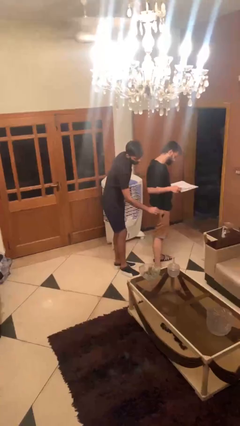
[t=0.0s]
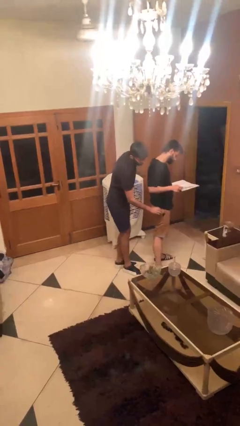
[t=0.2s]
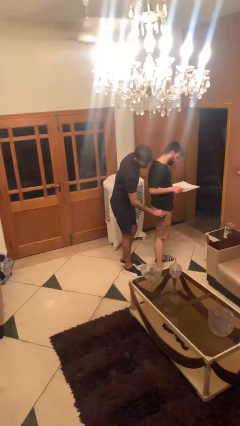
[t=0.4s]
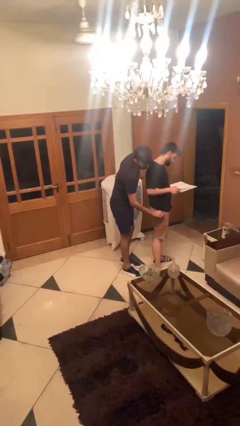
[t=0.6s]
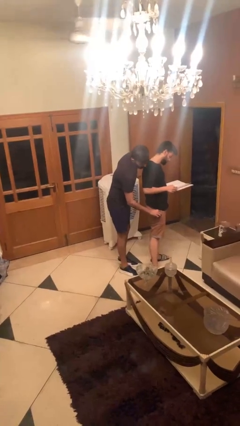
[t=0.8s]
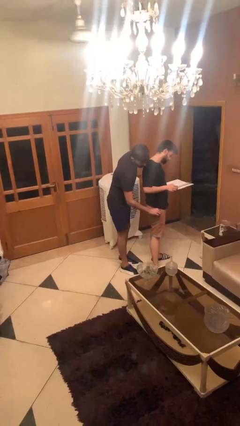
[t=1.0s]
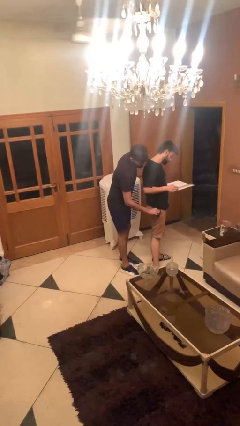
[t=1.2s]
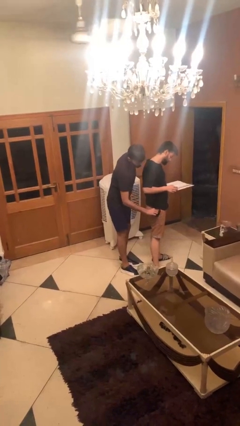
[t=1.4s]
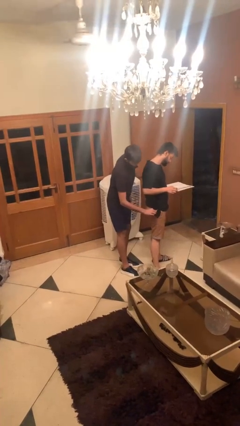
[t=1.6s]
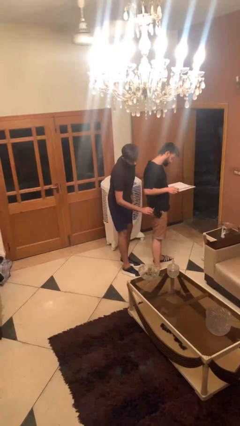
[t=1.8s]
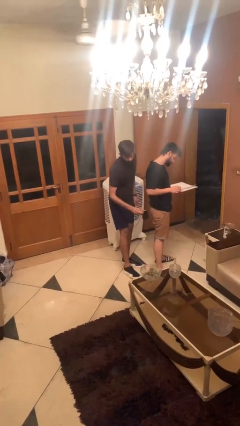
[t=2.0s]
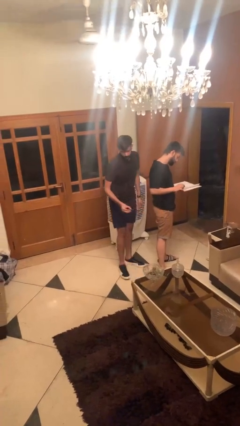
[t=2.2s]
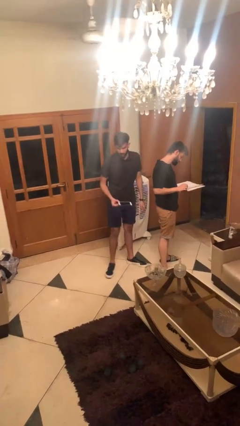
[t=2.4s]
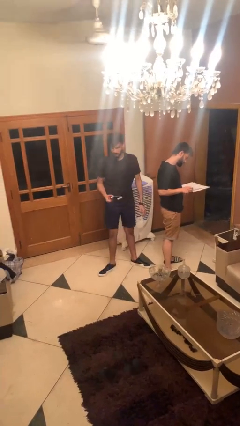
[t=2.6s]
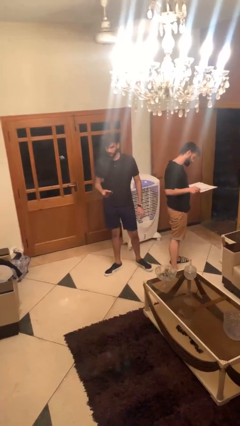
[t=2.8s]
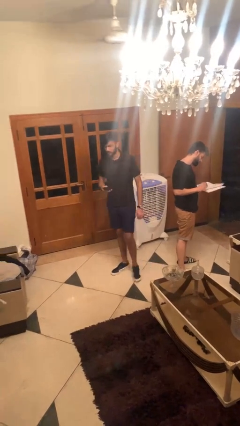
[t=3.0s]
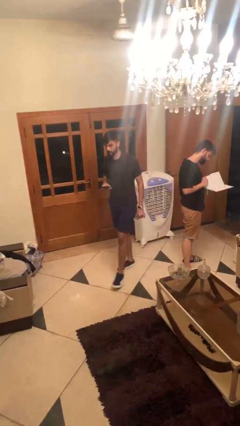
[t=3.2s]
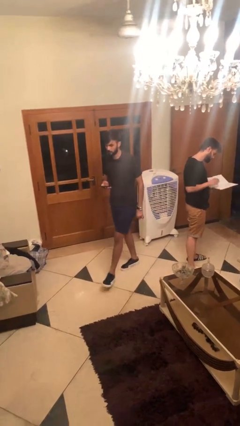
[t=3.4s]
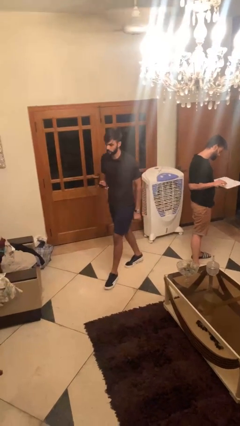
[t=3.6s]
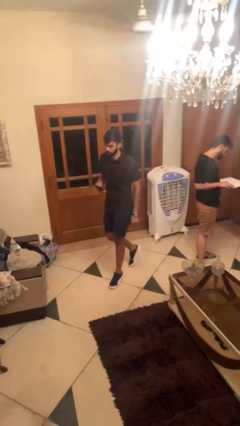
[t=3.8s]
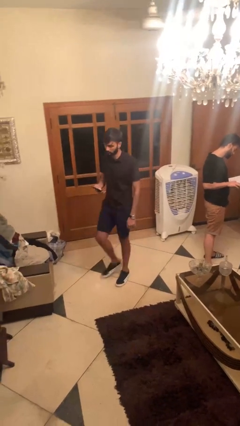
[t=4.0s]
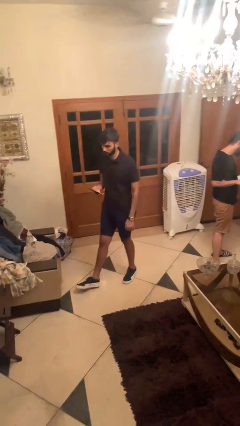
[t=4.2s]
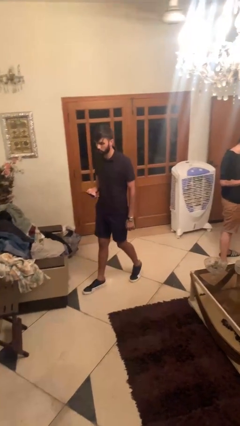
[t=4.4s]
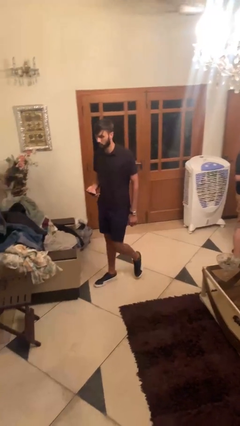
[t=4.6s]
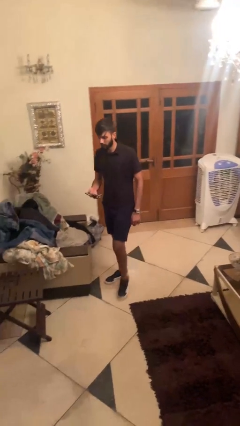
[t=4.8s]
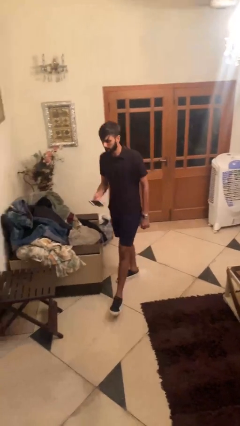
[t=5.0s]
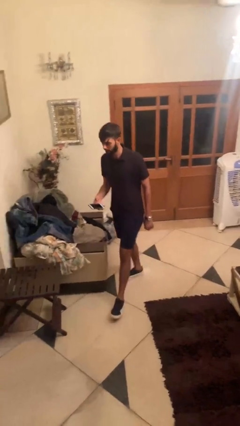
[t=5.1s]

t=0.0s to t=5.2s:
person steals object from person

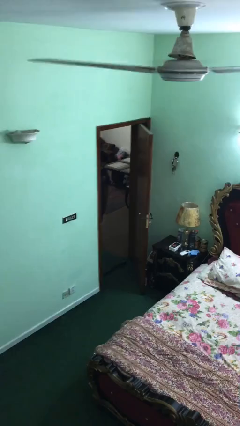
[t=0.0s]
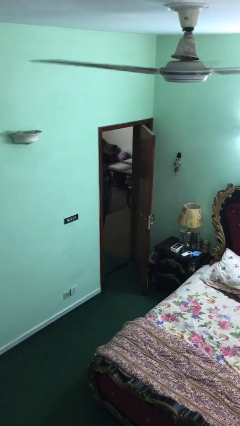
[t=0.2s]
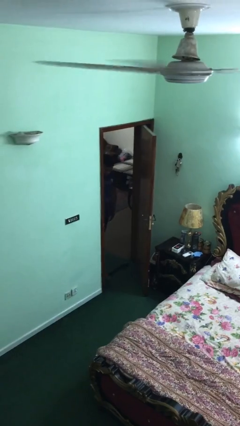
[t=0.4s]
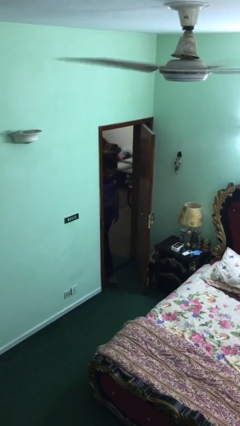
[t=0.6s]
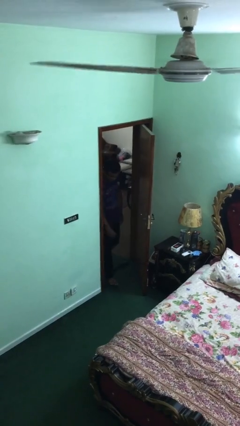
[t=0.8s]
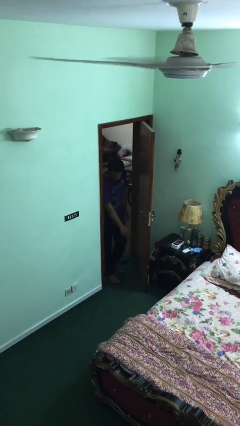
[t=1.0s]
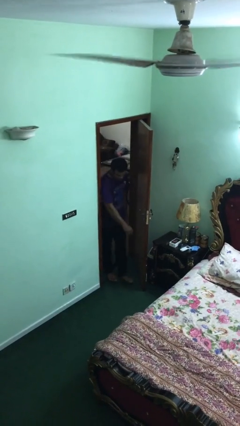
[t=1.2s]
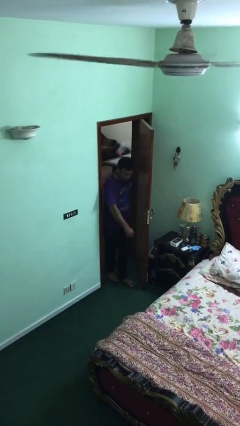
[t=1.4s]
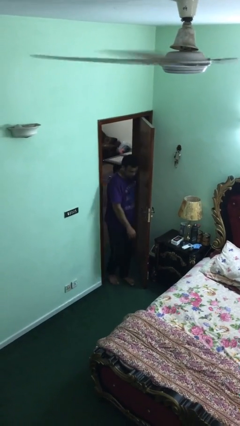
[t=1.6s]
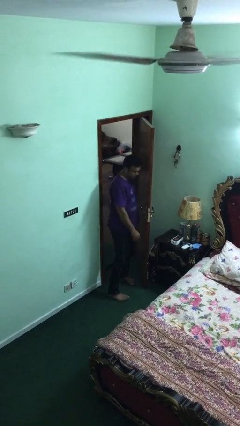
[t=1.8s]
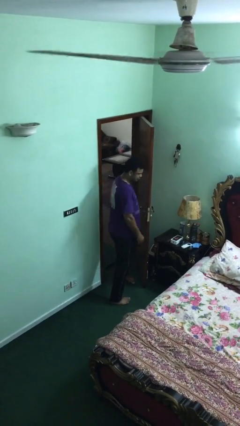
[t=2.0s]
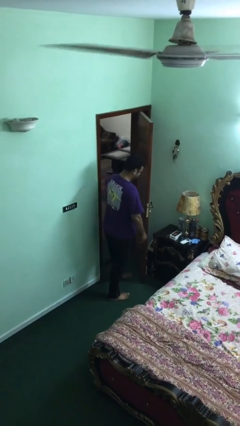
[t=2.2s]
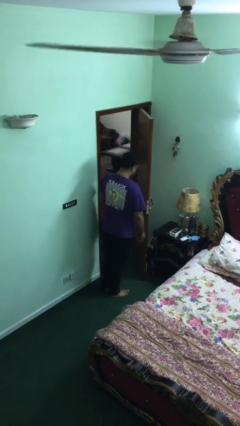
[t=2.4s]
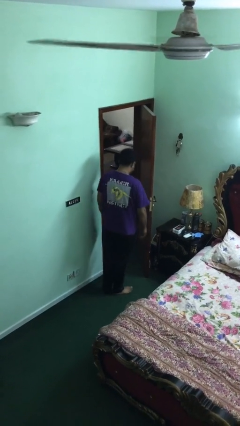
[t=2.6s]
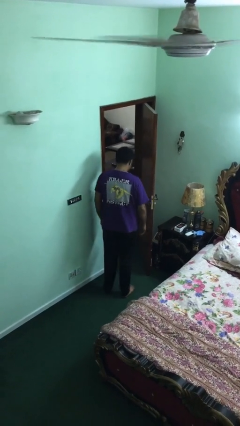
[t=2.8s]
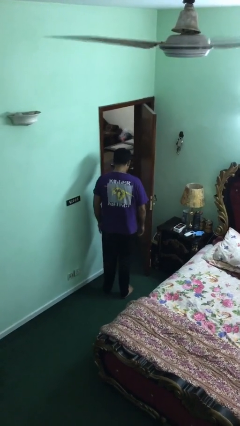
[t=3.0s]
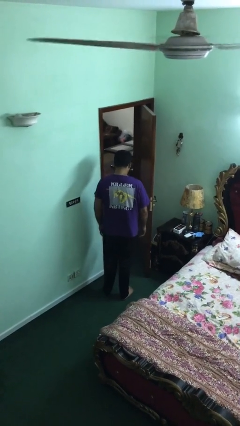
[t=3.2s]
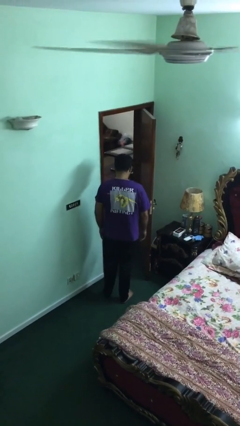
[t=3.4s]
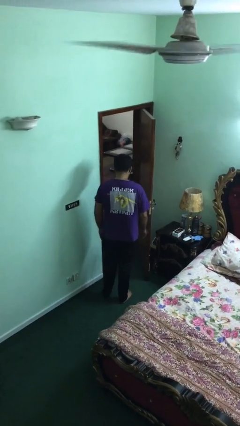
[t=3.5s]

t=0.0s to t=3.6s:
person enters scene through structure

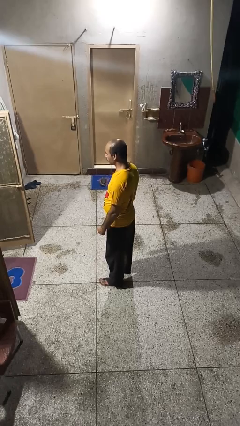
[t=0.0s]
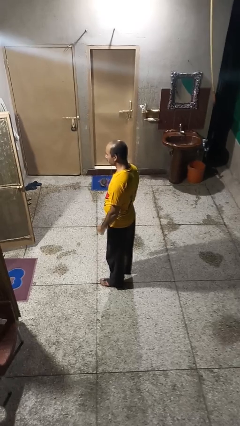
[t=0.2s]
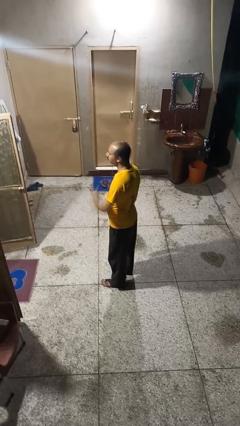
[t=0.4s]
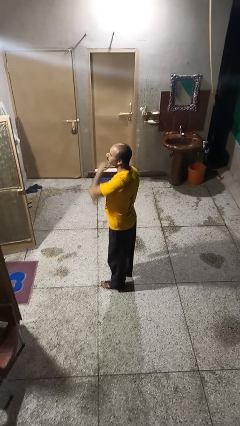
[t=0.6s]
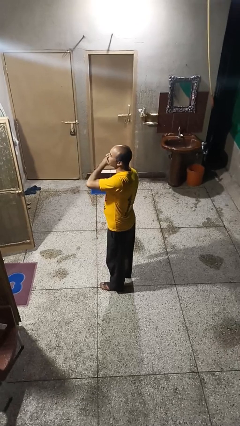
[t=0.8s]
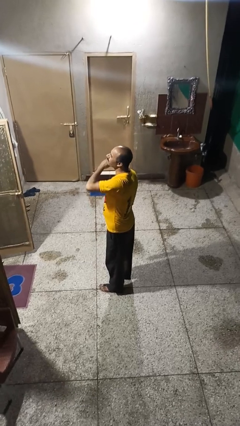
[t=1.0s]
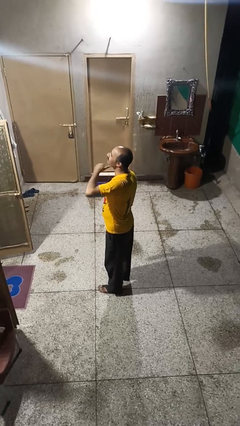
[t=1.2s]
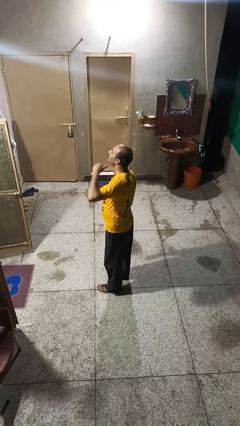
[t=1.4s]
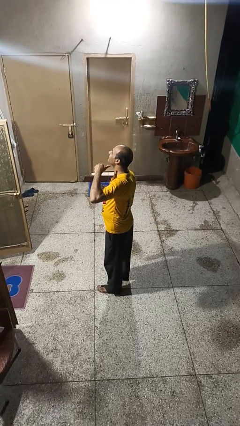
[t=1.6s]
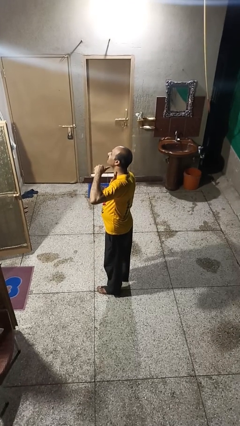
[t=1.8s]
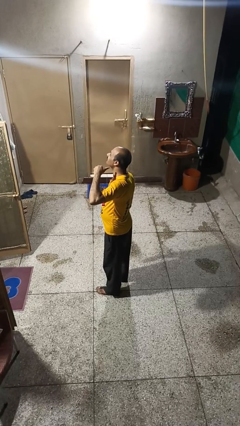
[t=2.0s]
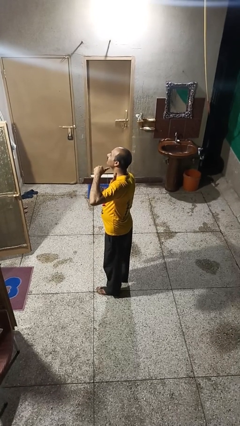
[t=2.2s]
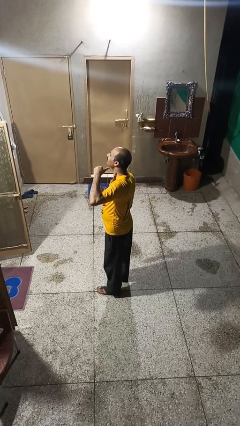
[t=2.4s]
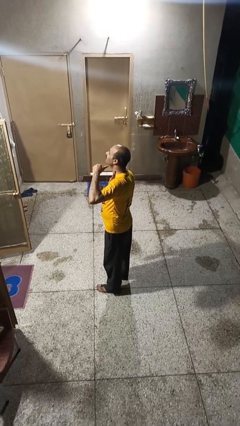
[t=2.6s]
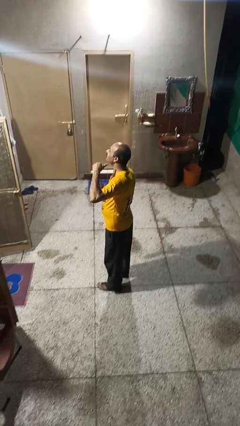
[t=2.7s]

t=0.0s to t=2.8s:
person gestures cut

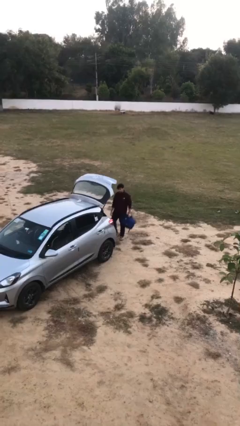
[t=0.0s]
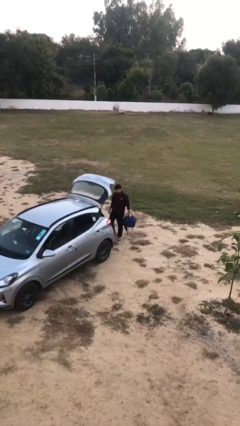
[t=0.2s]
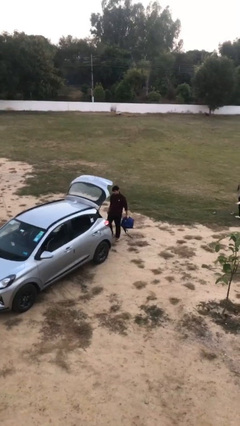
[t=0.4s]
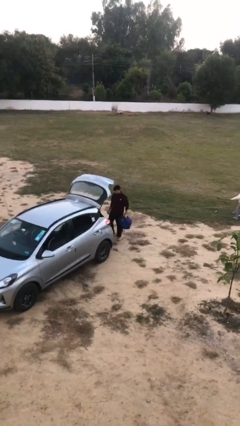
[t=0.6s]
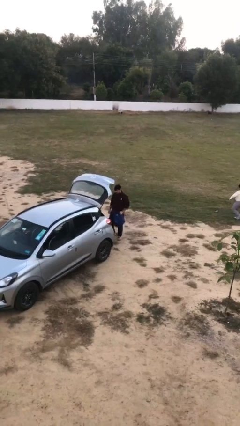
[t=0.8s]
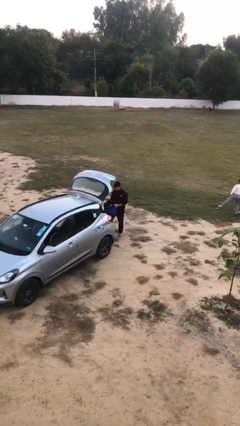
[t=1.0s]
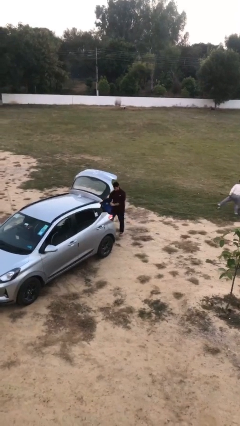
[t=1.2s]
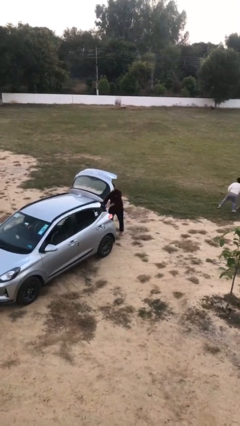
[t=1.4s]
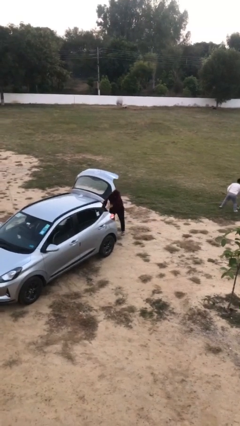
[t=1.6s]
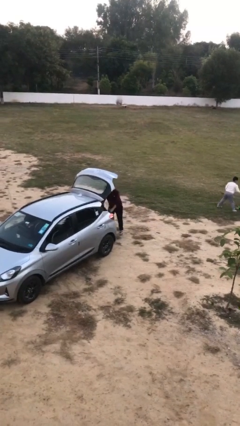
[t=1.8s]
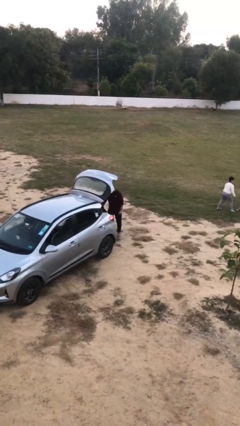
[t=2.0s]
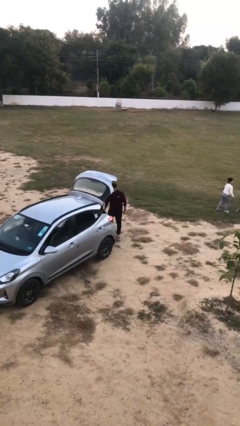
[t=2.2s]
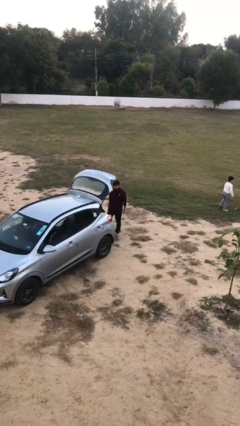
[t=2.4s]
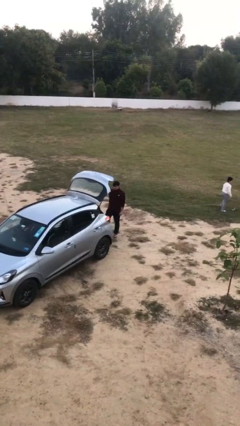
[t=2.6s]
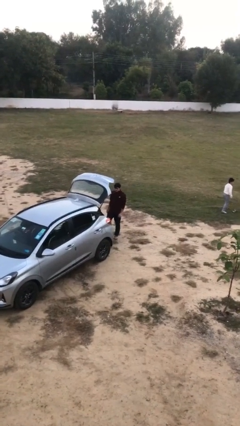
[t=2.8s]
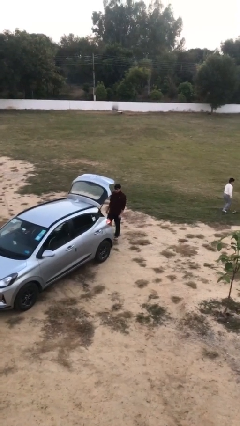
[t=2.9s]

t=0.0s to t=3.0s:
person loads car

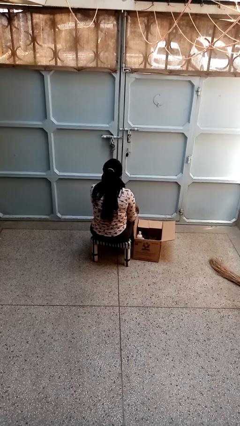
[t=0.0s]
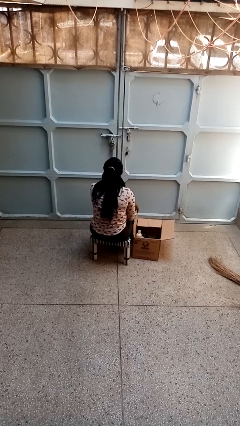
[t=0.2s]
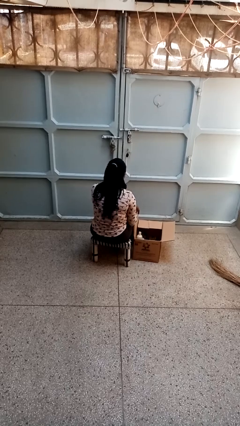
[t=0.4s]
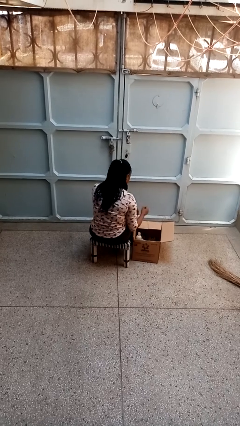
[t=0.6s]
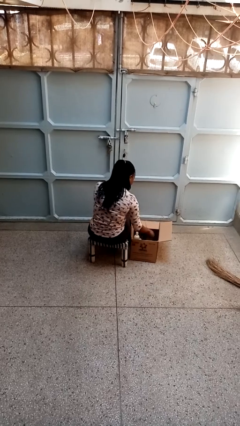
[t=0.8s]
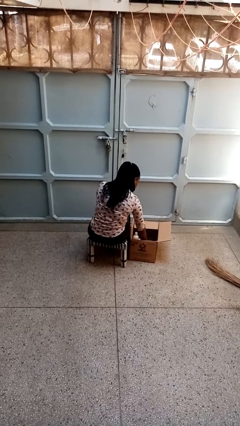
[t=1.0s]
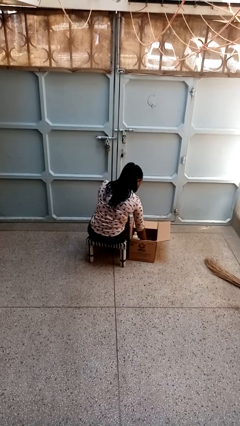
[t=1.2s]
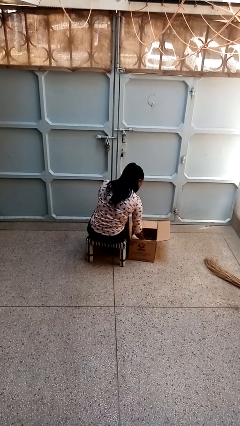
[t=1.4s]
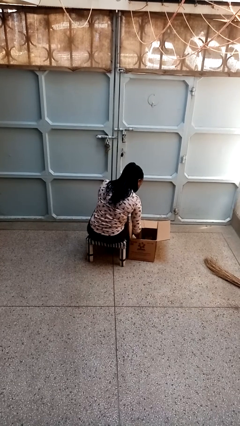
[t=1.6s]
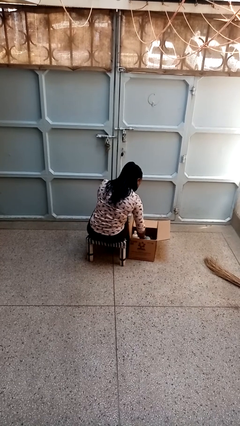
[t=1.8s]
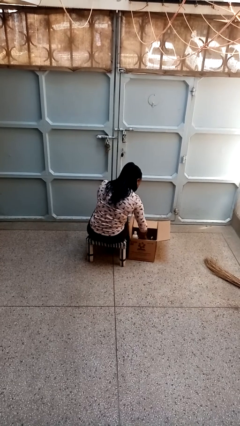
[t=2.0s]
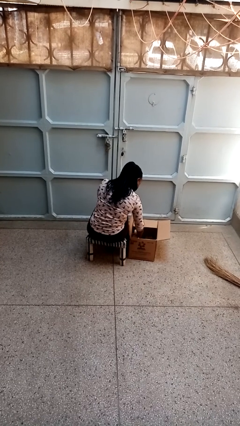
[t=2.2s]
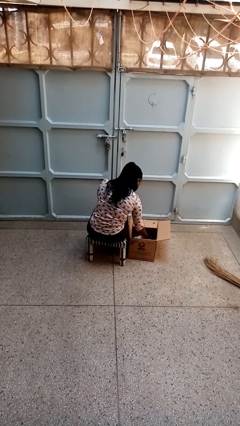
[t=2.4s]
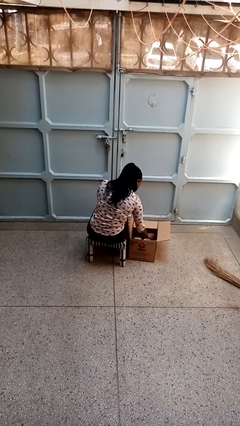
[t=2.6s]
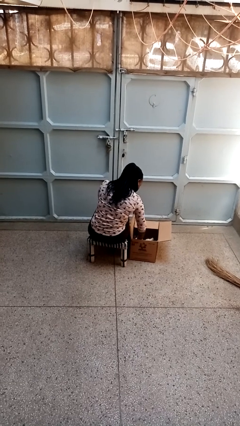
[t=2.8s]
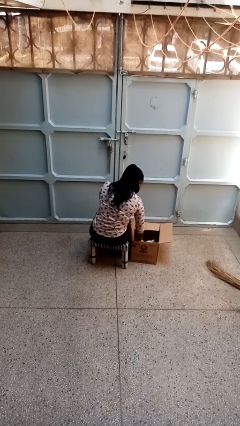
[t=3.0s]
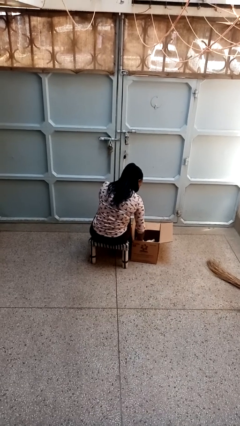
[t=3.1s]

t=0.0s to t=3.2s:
person searches in box
